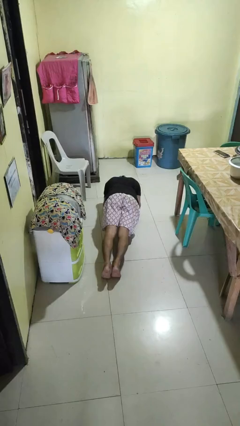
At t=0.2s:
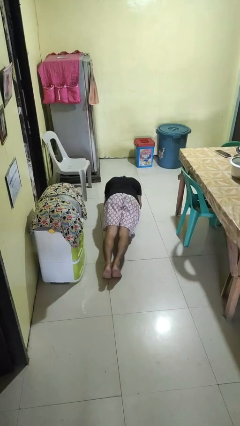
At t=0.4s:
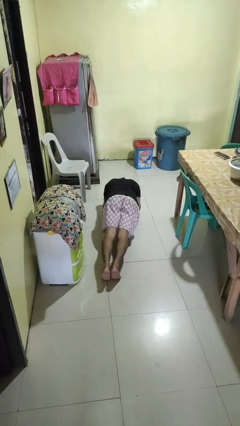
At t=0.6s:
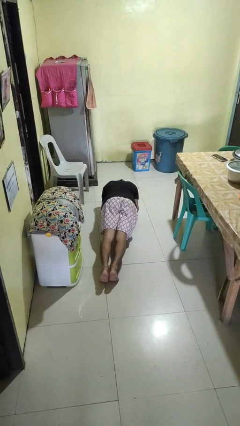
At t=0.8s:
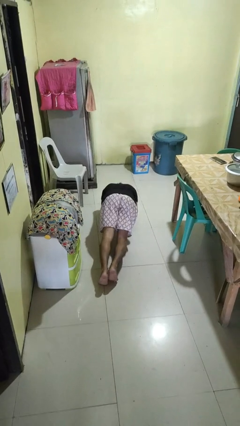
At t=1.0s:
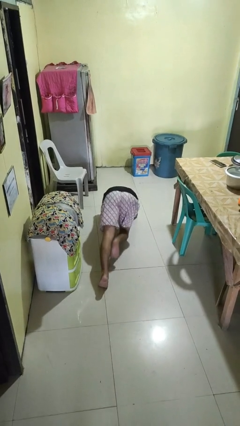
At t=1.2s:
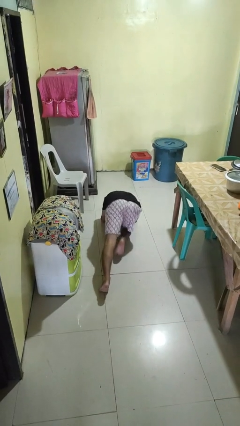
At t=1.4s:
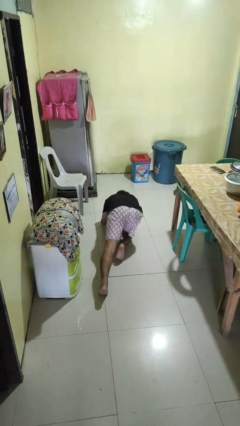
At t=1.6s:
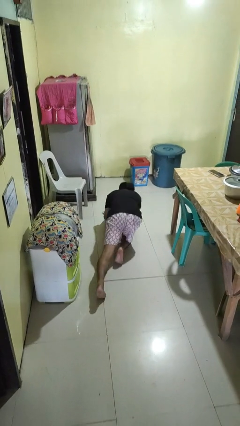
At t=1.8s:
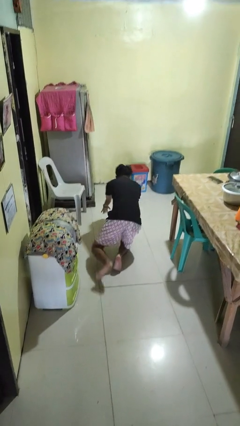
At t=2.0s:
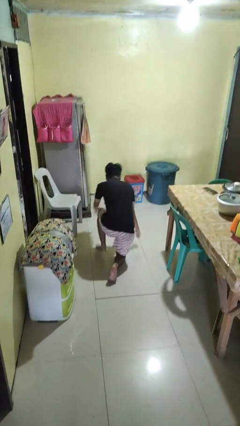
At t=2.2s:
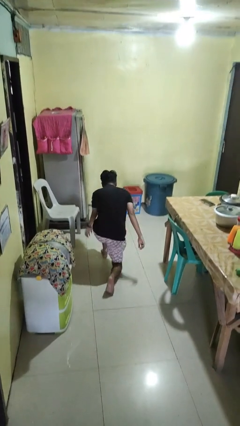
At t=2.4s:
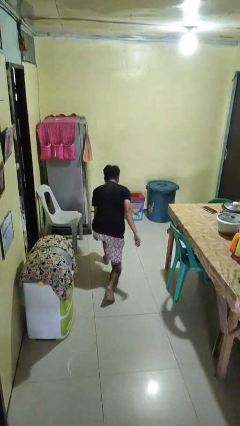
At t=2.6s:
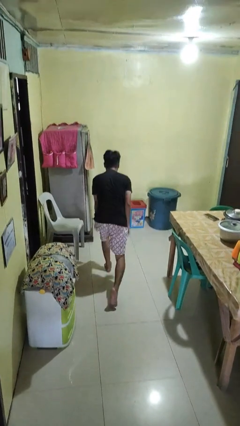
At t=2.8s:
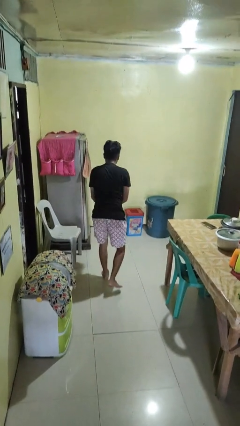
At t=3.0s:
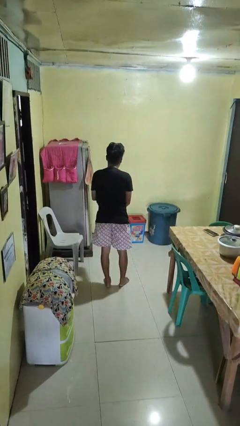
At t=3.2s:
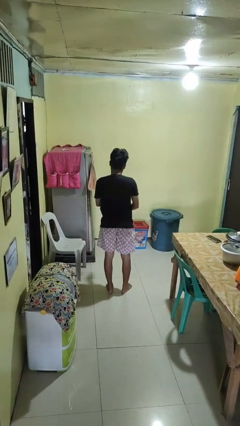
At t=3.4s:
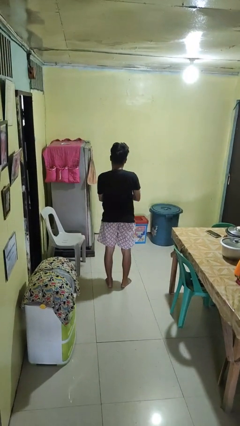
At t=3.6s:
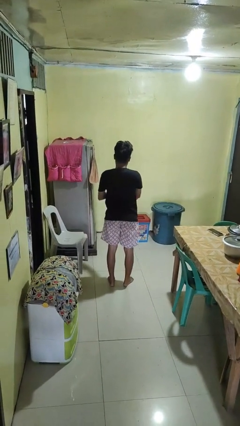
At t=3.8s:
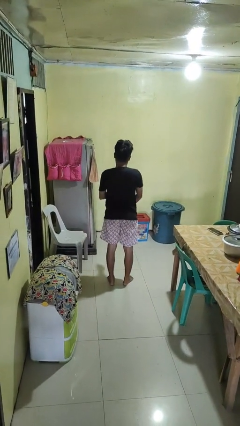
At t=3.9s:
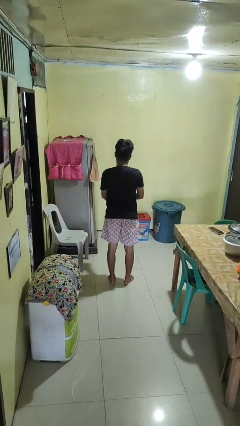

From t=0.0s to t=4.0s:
person stands up from floor

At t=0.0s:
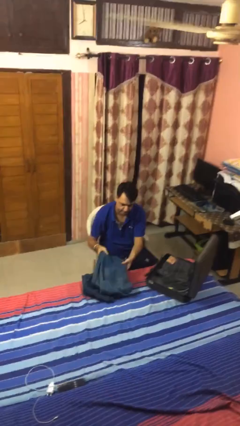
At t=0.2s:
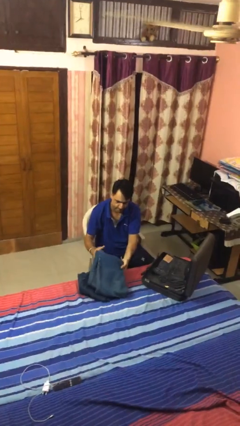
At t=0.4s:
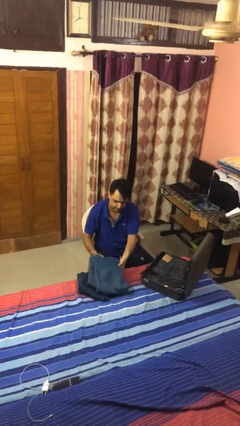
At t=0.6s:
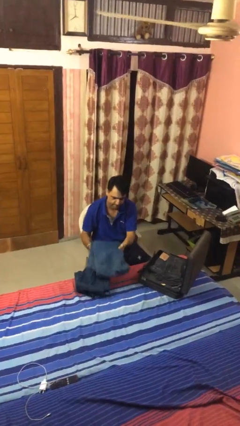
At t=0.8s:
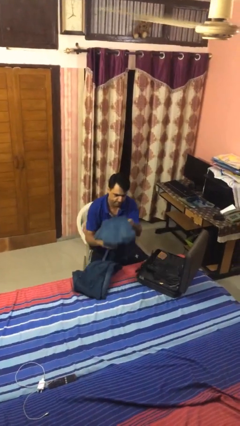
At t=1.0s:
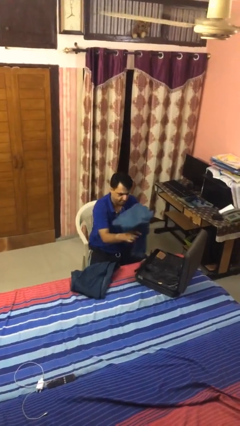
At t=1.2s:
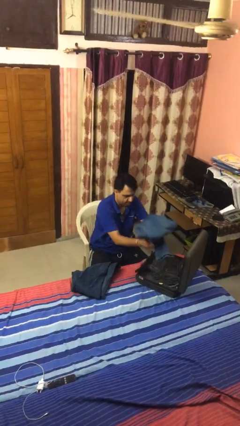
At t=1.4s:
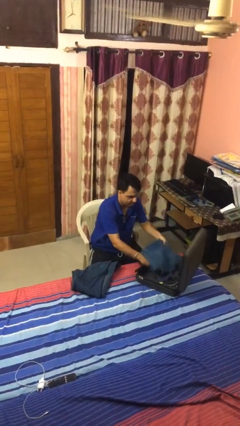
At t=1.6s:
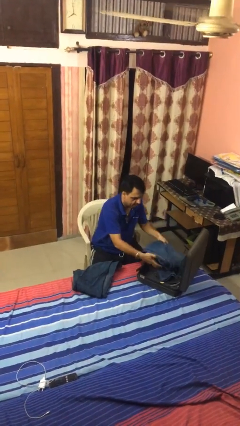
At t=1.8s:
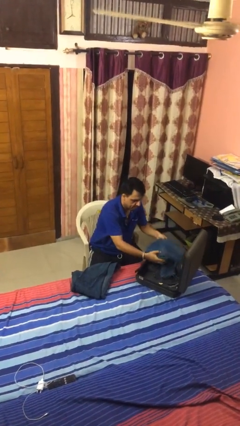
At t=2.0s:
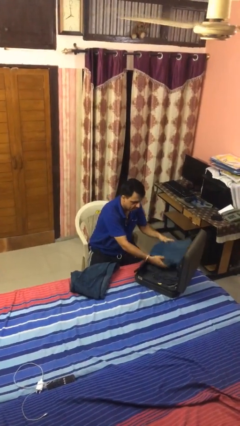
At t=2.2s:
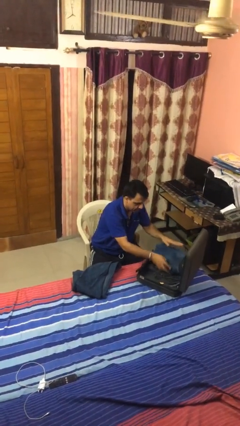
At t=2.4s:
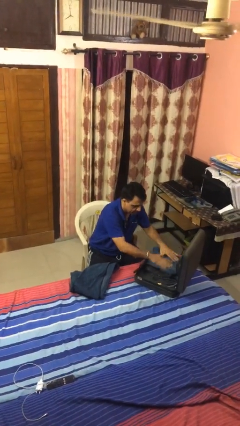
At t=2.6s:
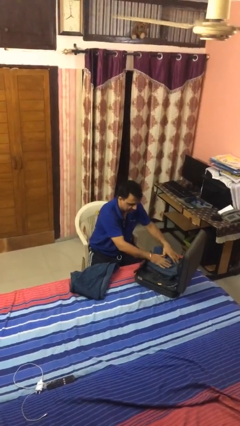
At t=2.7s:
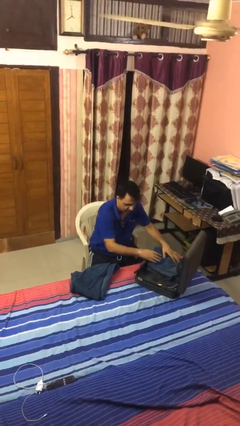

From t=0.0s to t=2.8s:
person loads clothes into suitcase

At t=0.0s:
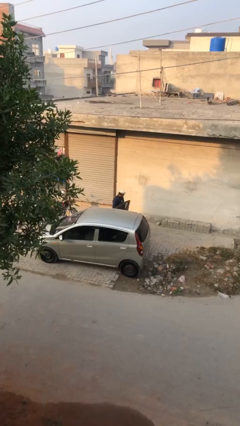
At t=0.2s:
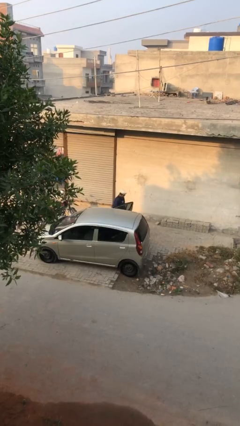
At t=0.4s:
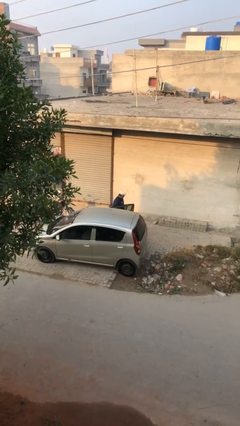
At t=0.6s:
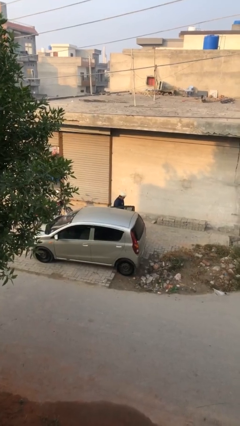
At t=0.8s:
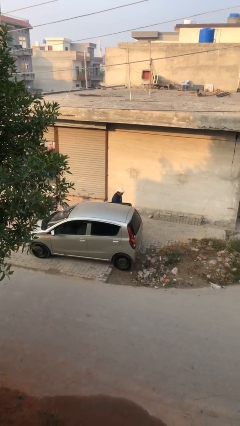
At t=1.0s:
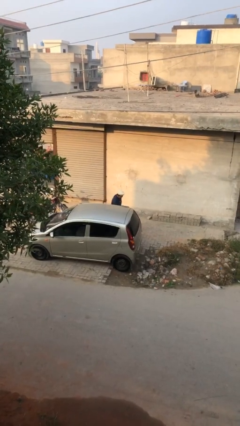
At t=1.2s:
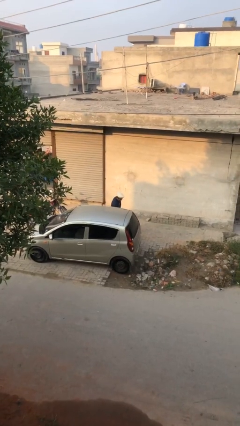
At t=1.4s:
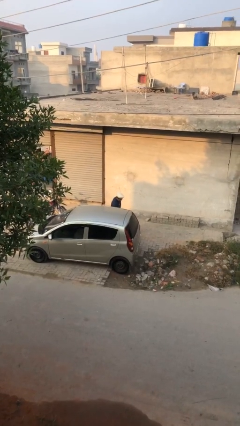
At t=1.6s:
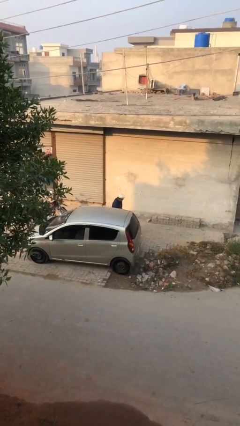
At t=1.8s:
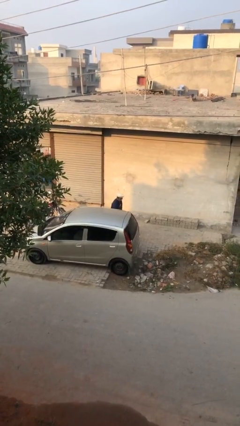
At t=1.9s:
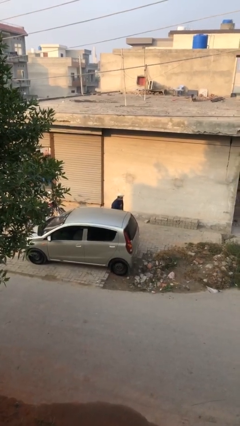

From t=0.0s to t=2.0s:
person closes car door

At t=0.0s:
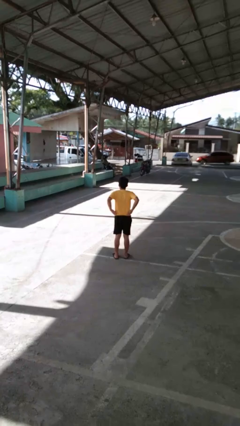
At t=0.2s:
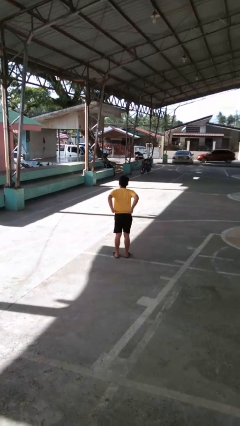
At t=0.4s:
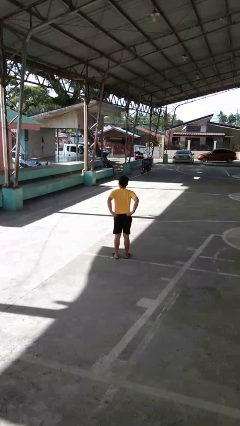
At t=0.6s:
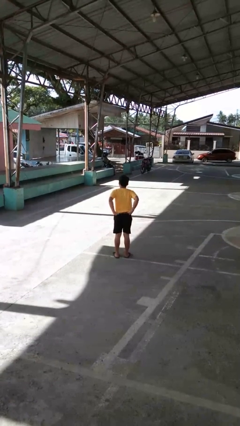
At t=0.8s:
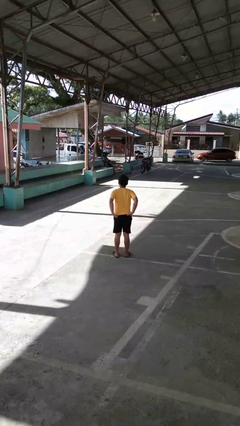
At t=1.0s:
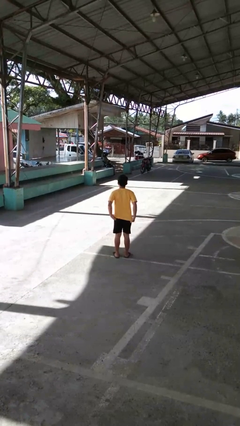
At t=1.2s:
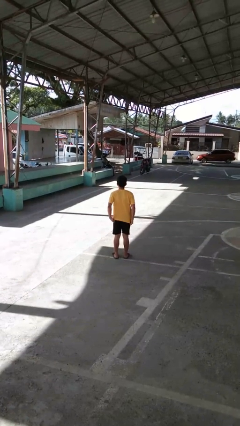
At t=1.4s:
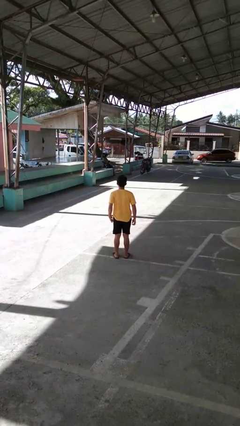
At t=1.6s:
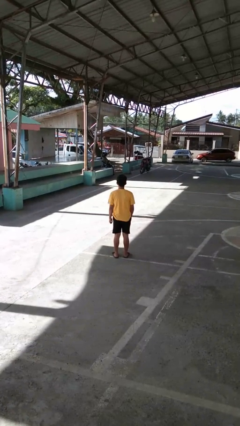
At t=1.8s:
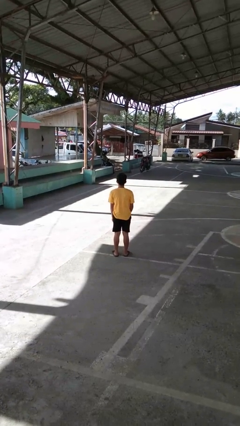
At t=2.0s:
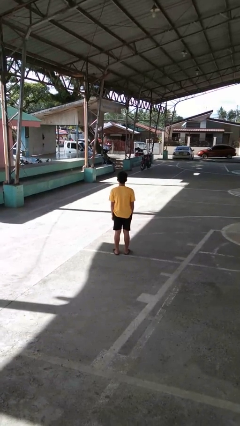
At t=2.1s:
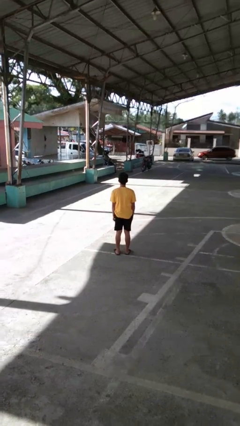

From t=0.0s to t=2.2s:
person untucks shirt

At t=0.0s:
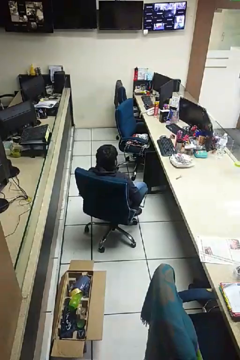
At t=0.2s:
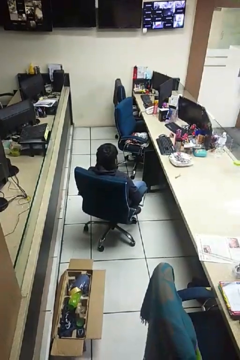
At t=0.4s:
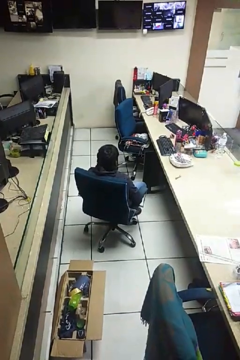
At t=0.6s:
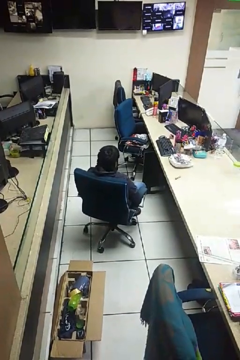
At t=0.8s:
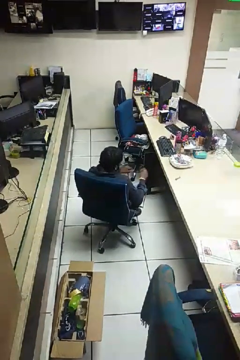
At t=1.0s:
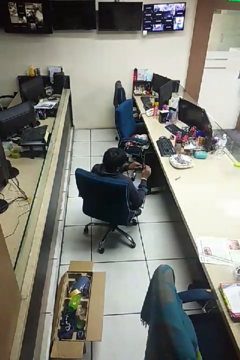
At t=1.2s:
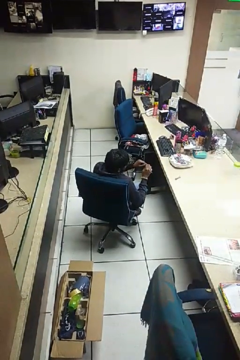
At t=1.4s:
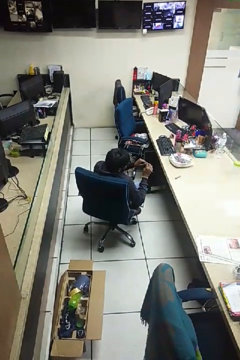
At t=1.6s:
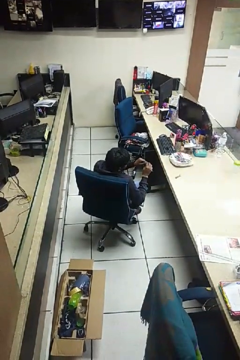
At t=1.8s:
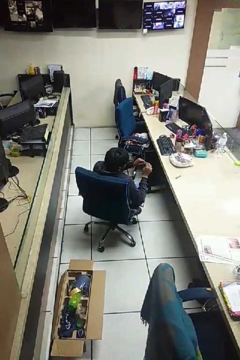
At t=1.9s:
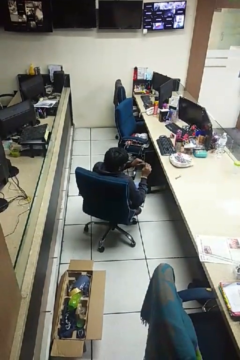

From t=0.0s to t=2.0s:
person files fingernails

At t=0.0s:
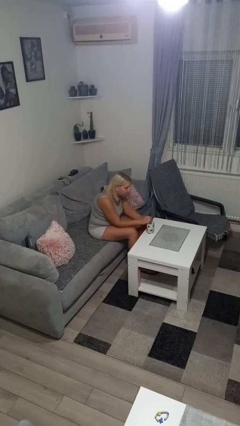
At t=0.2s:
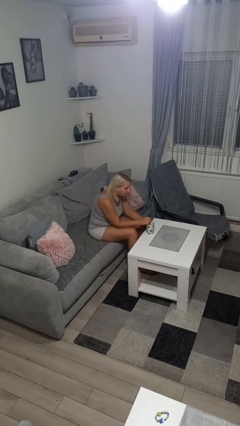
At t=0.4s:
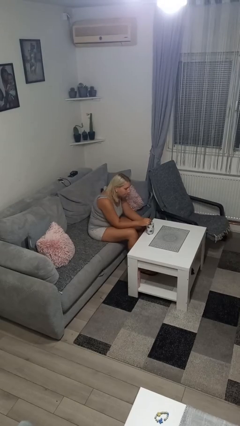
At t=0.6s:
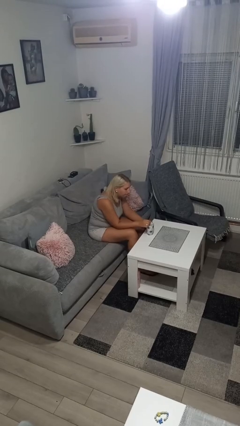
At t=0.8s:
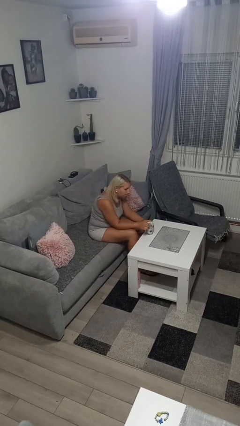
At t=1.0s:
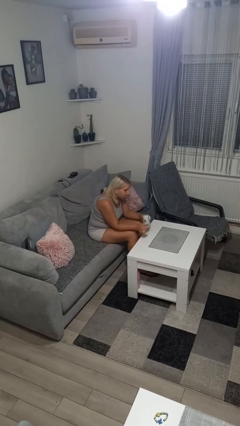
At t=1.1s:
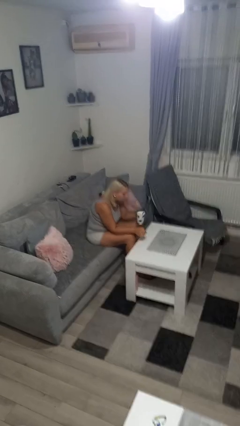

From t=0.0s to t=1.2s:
person stirs mug

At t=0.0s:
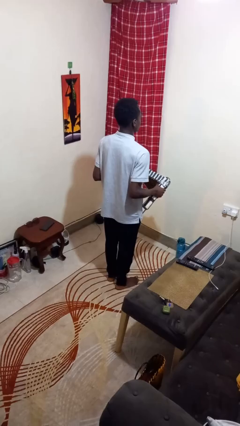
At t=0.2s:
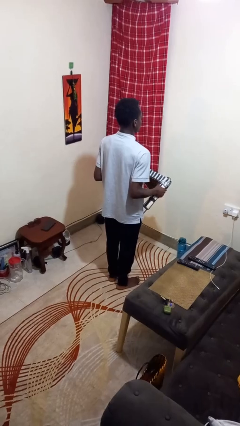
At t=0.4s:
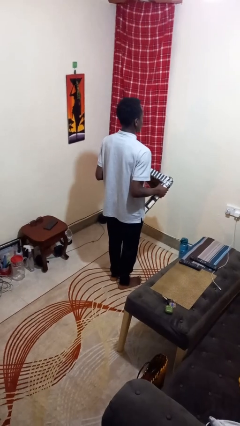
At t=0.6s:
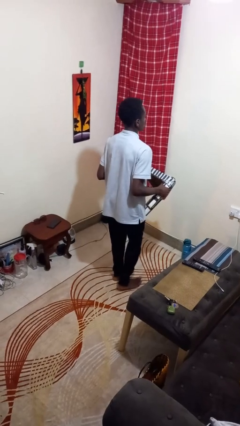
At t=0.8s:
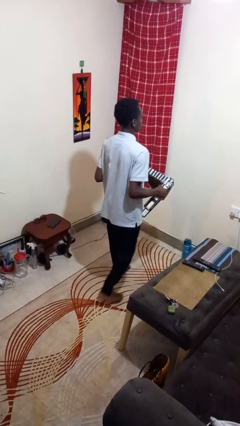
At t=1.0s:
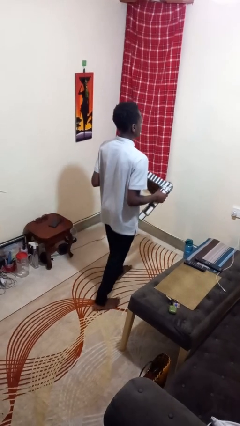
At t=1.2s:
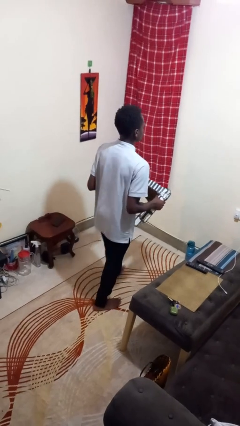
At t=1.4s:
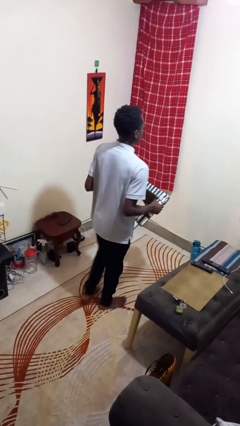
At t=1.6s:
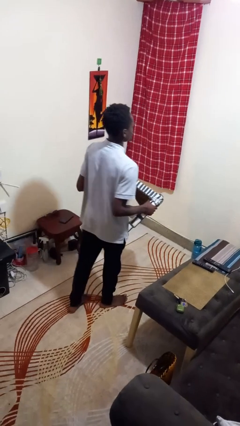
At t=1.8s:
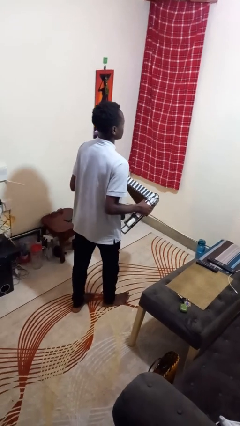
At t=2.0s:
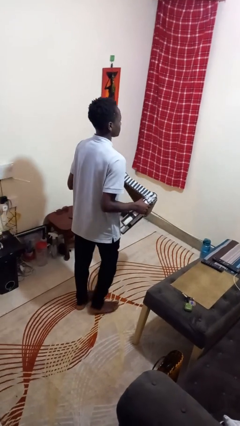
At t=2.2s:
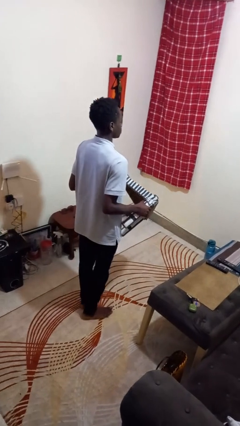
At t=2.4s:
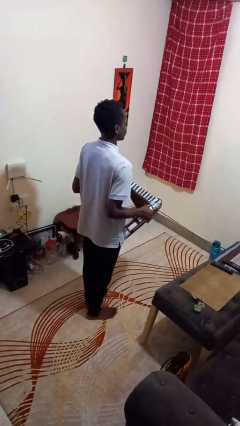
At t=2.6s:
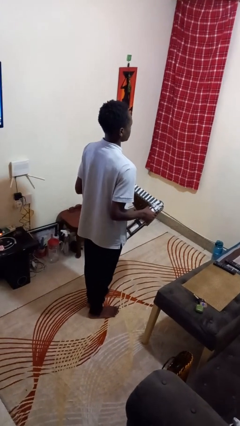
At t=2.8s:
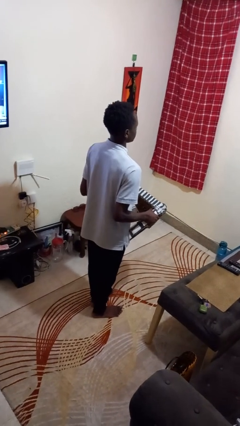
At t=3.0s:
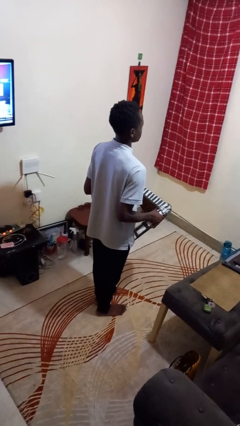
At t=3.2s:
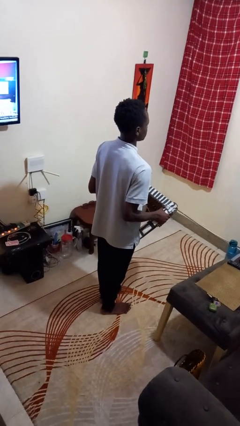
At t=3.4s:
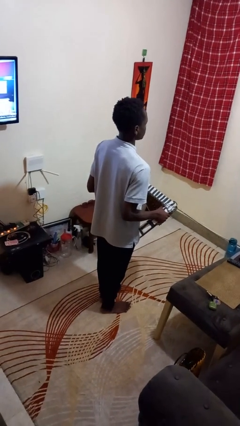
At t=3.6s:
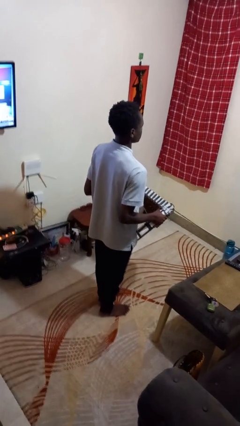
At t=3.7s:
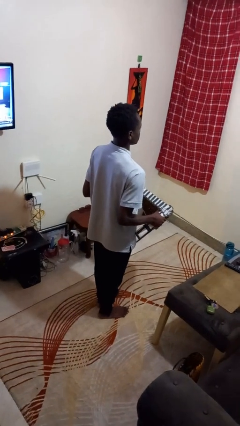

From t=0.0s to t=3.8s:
person carries furniture
